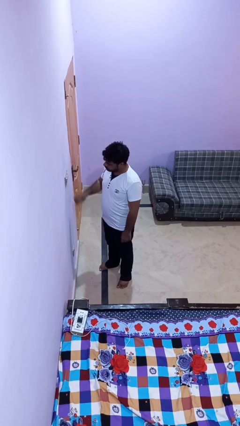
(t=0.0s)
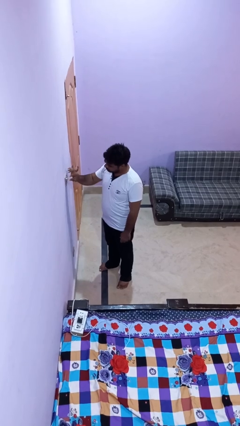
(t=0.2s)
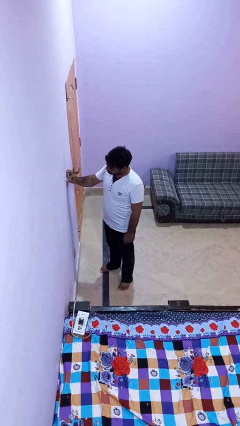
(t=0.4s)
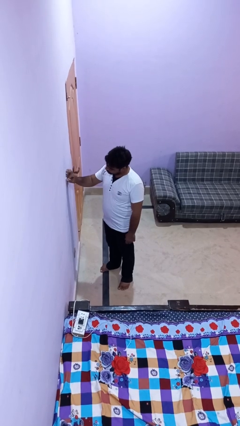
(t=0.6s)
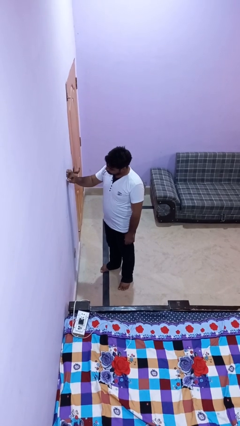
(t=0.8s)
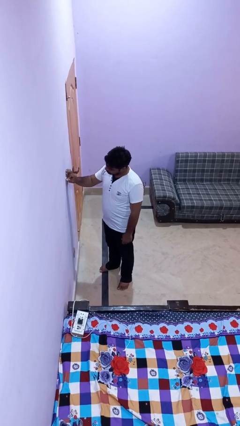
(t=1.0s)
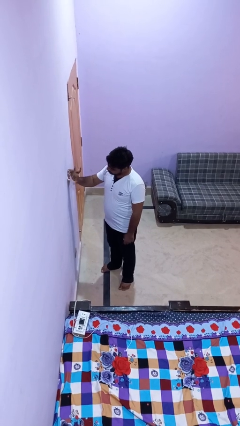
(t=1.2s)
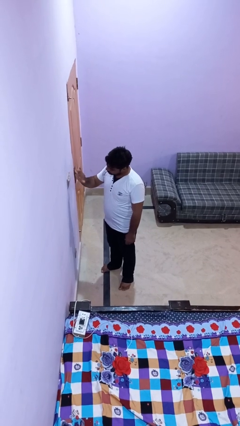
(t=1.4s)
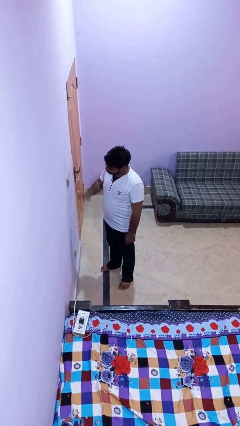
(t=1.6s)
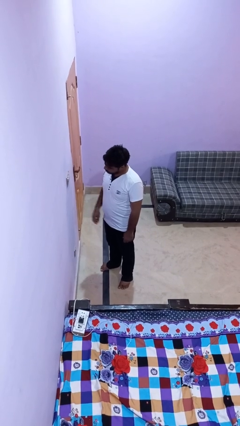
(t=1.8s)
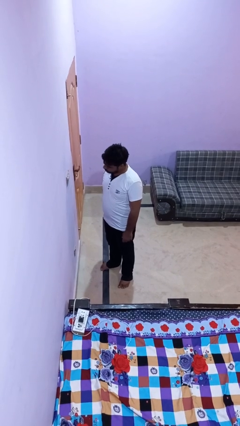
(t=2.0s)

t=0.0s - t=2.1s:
person adjusts thermostat

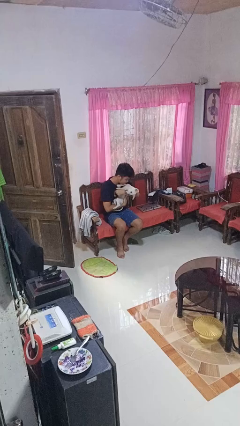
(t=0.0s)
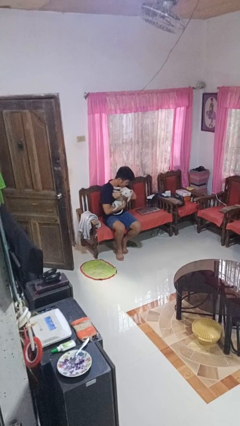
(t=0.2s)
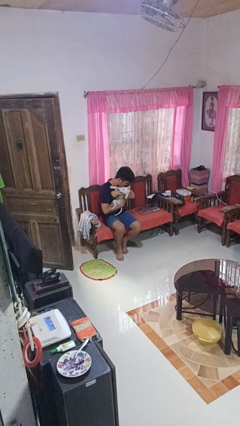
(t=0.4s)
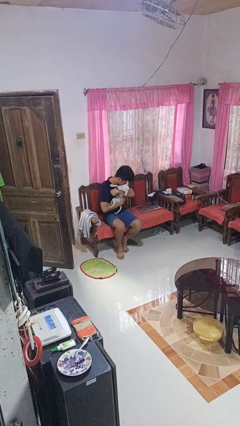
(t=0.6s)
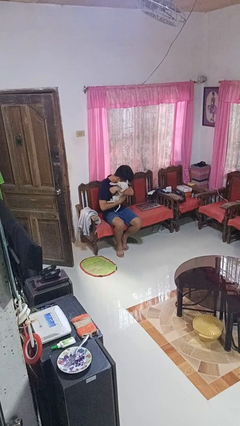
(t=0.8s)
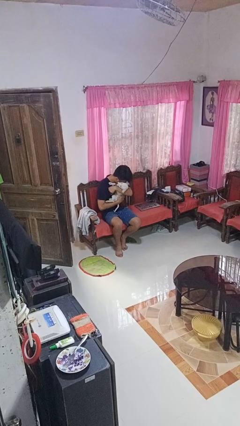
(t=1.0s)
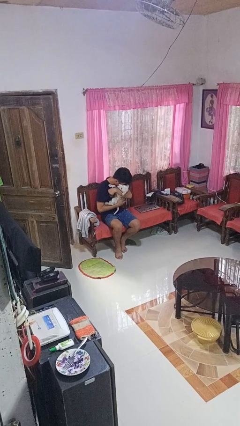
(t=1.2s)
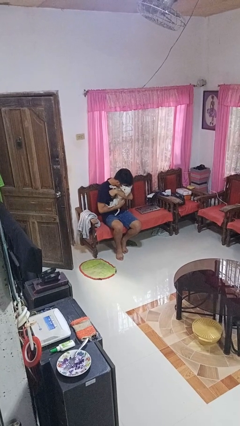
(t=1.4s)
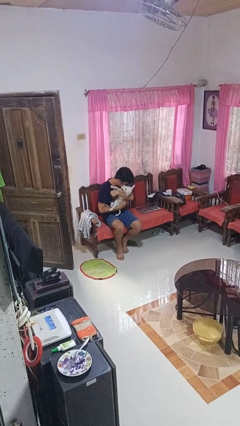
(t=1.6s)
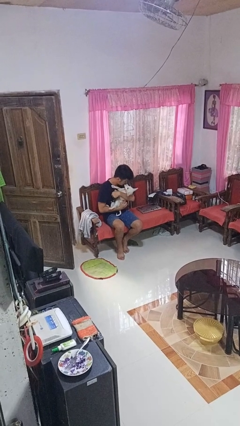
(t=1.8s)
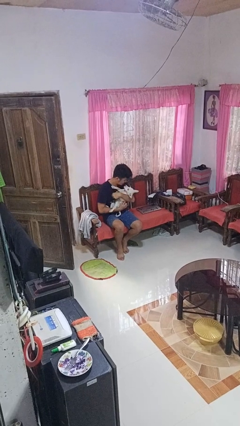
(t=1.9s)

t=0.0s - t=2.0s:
person hugs dog

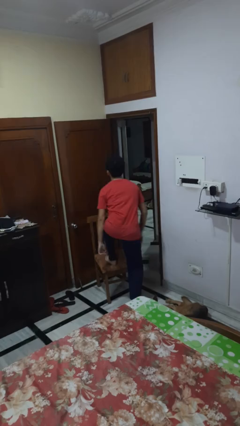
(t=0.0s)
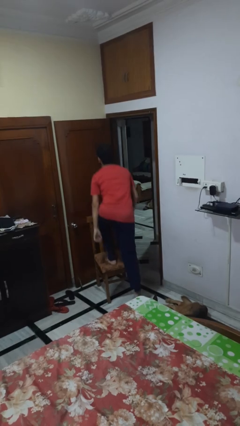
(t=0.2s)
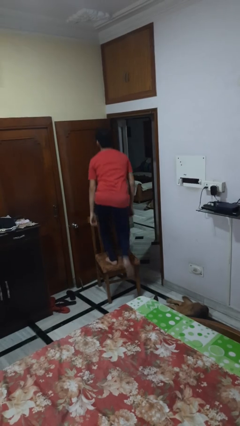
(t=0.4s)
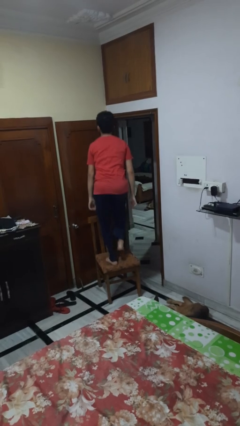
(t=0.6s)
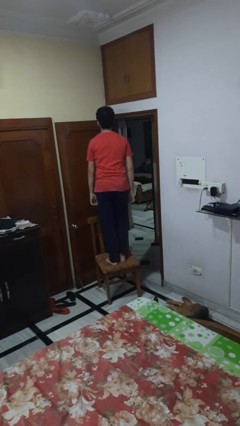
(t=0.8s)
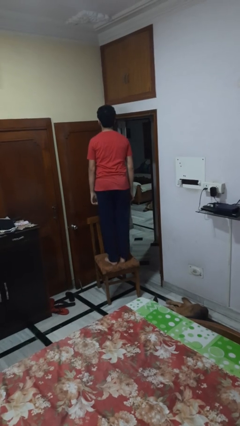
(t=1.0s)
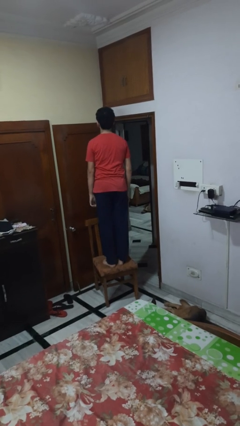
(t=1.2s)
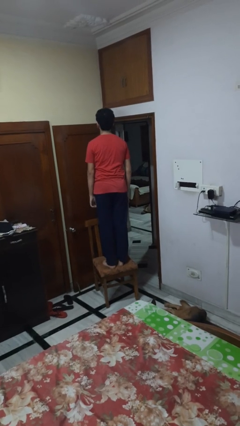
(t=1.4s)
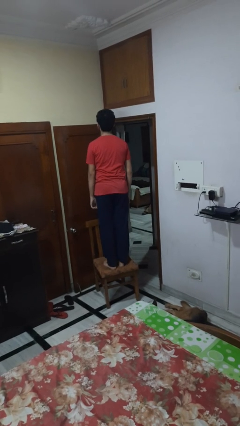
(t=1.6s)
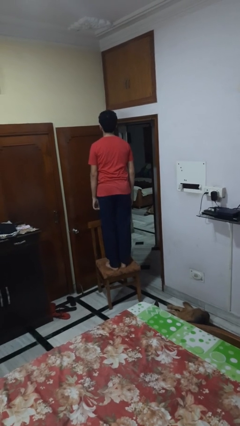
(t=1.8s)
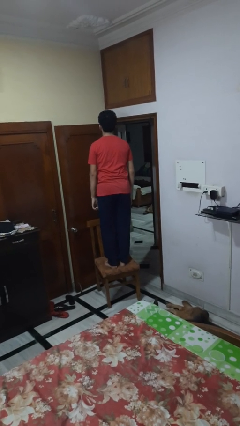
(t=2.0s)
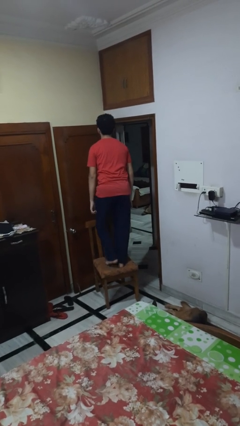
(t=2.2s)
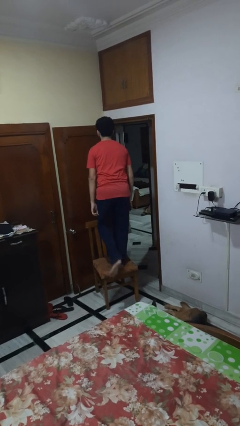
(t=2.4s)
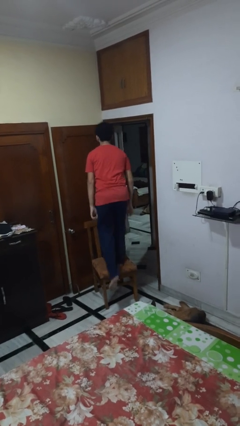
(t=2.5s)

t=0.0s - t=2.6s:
person climbs on chair

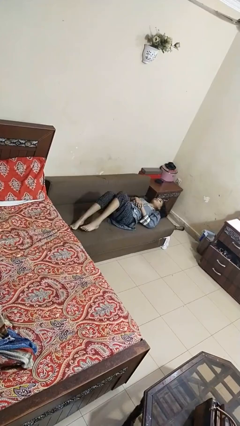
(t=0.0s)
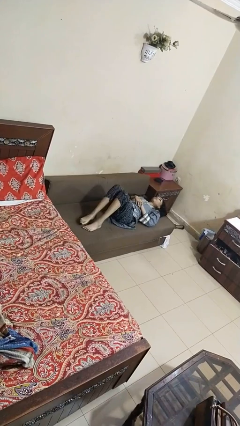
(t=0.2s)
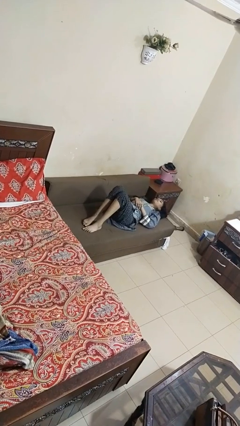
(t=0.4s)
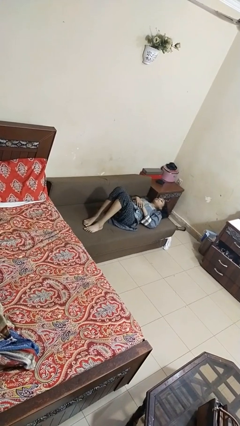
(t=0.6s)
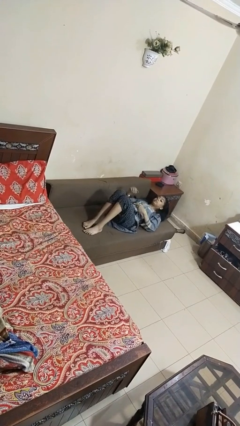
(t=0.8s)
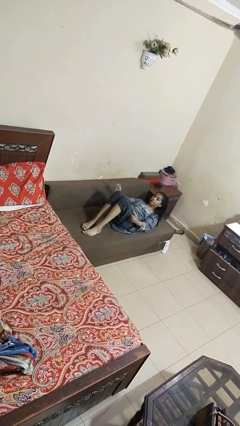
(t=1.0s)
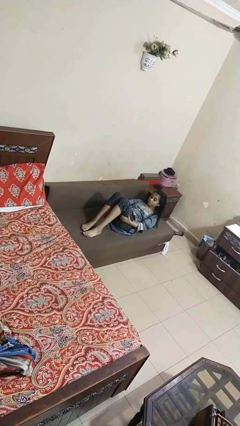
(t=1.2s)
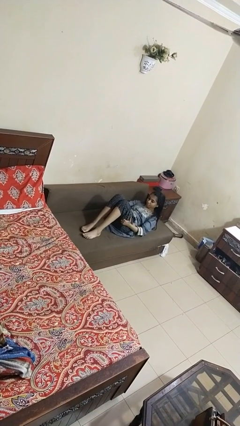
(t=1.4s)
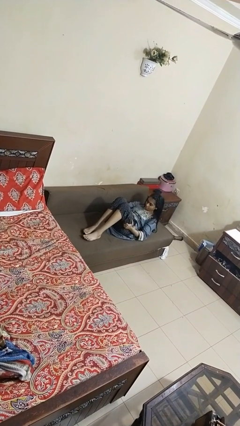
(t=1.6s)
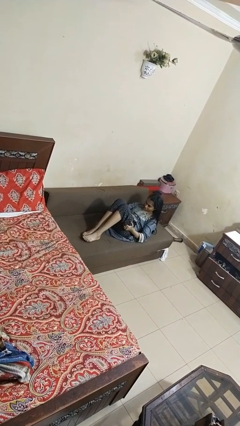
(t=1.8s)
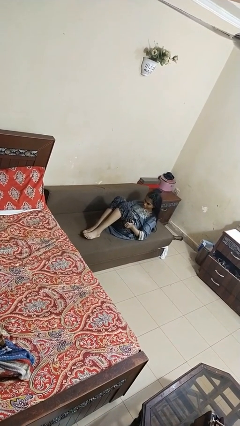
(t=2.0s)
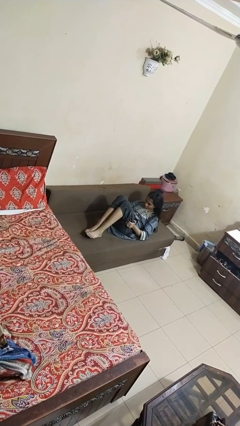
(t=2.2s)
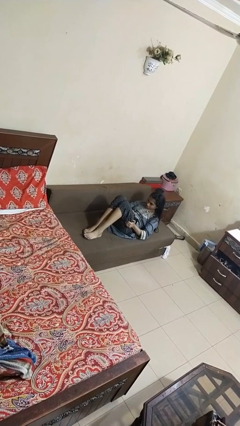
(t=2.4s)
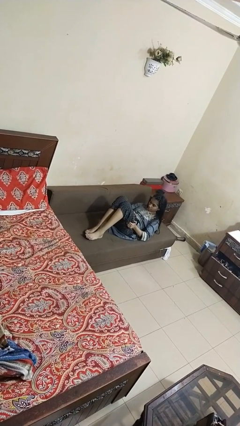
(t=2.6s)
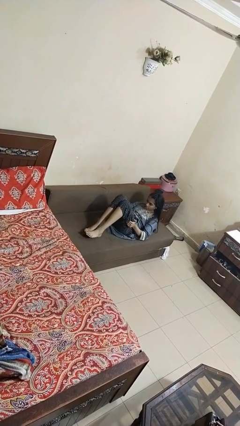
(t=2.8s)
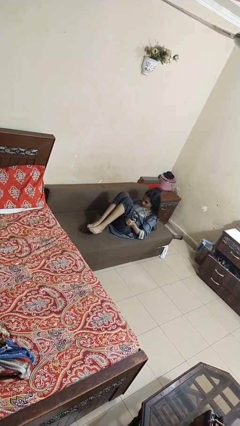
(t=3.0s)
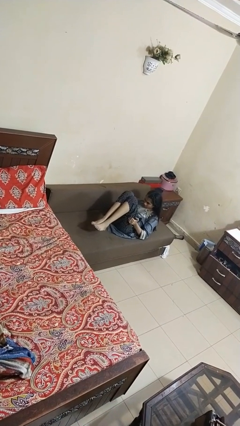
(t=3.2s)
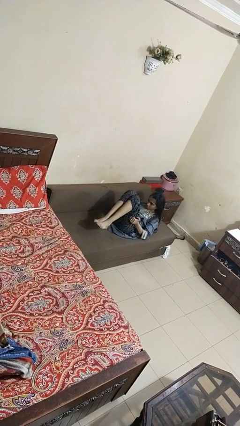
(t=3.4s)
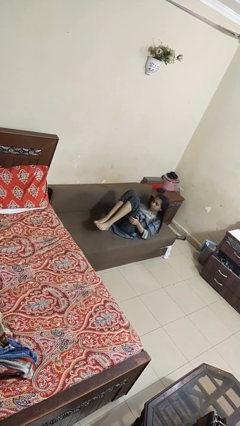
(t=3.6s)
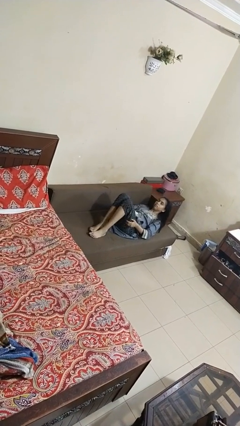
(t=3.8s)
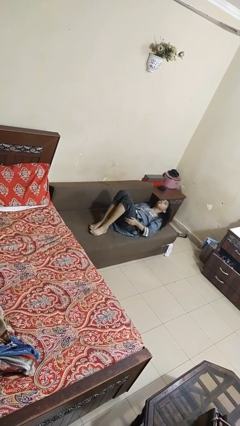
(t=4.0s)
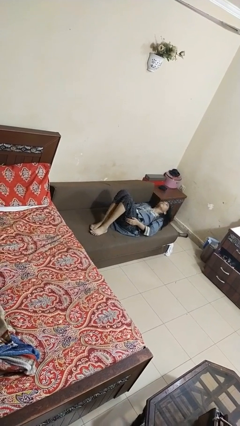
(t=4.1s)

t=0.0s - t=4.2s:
person exercises with pushup

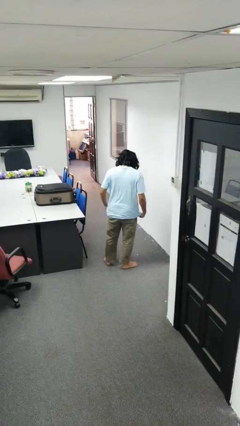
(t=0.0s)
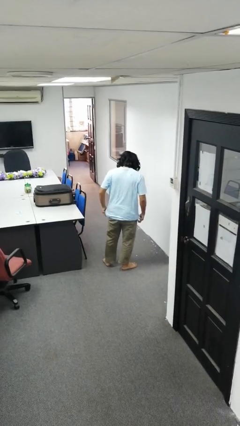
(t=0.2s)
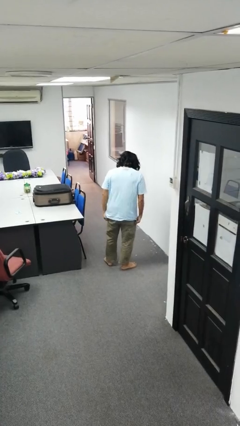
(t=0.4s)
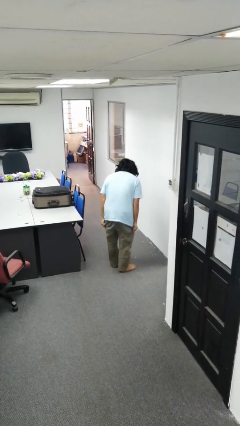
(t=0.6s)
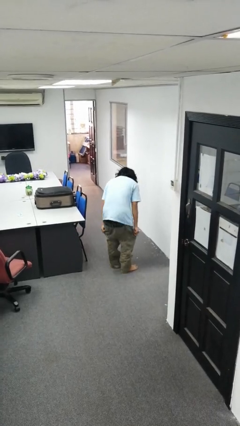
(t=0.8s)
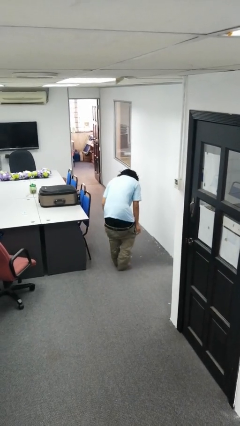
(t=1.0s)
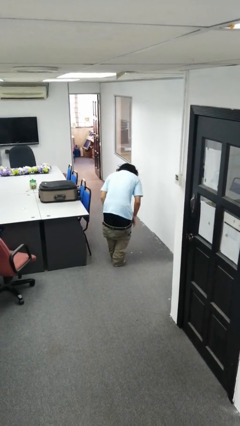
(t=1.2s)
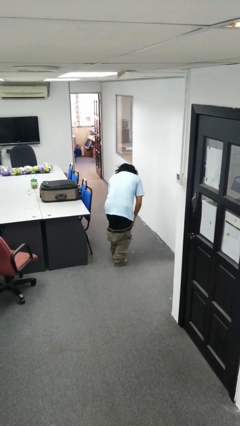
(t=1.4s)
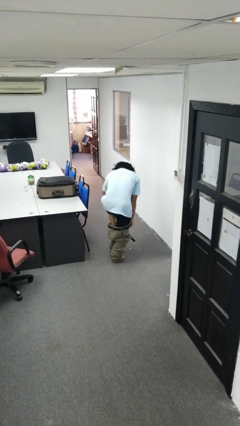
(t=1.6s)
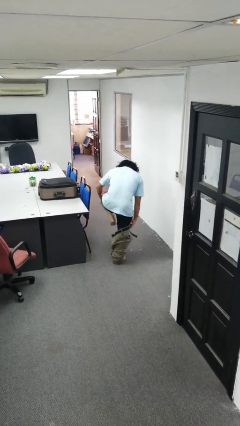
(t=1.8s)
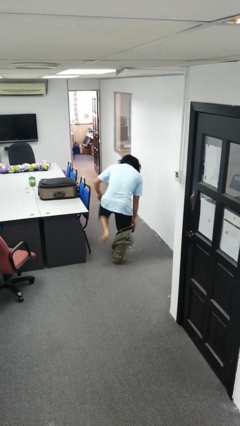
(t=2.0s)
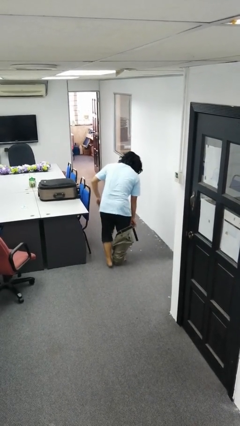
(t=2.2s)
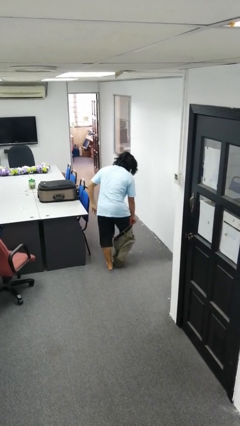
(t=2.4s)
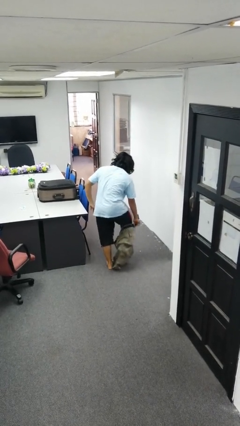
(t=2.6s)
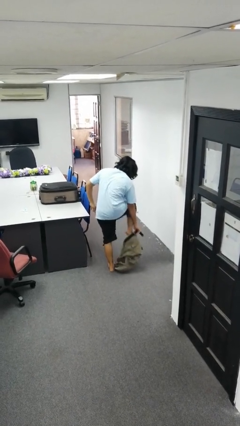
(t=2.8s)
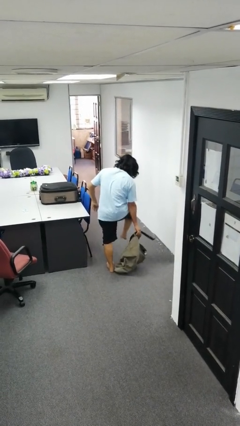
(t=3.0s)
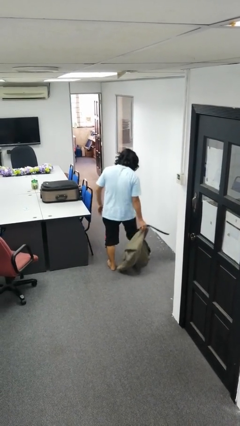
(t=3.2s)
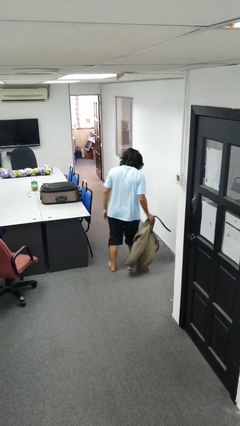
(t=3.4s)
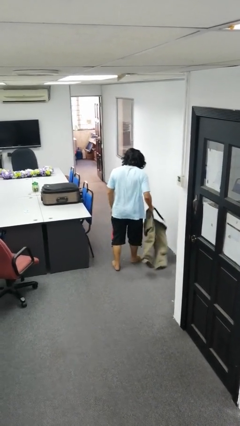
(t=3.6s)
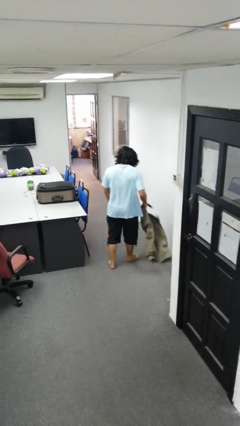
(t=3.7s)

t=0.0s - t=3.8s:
person puts on pants

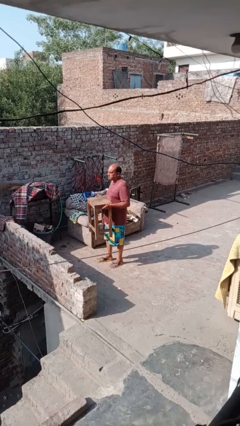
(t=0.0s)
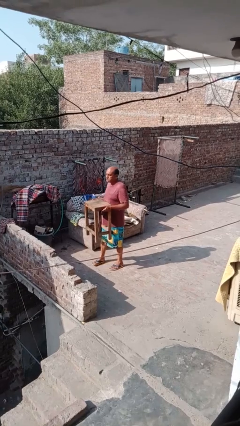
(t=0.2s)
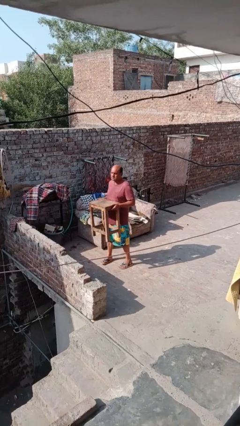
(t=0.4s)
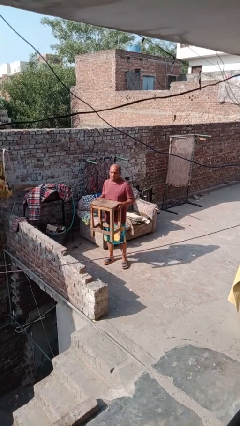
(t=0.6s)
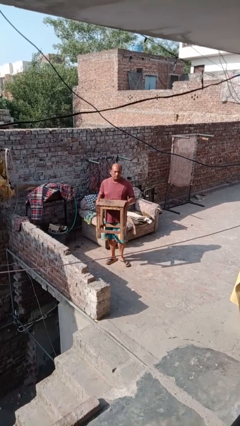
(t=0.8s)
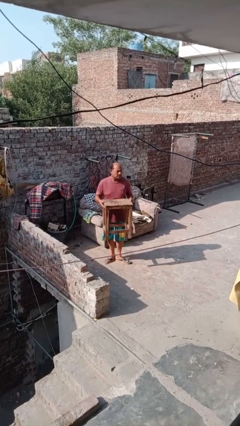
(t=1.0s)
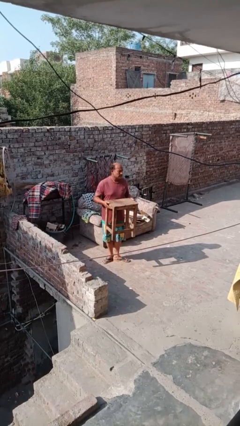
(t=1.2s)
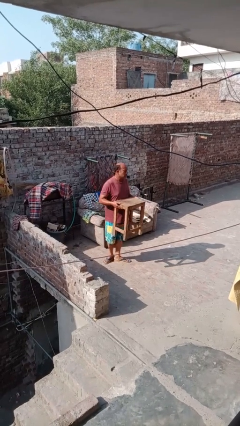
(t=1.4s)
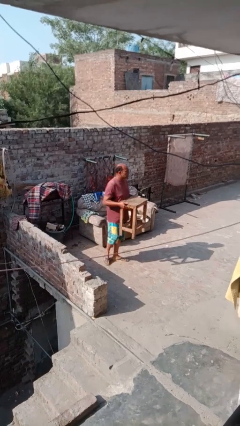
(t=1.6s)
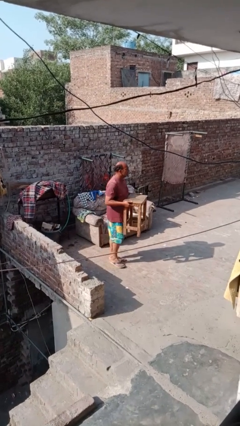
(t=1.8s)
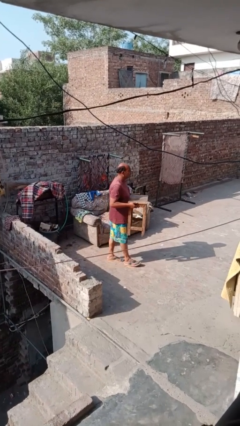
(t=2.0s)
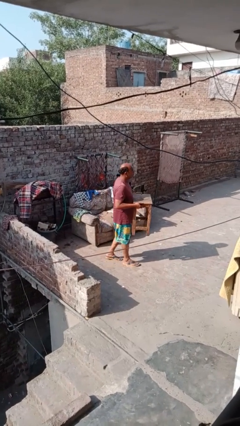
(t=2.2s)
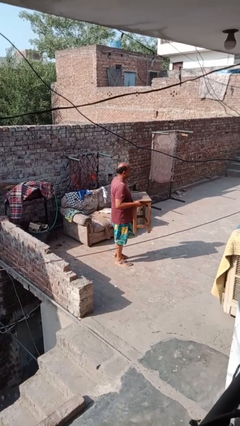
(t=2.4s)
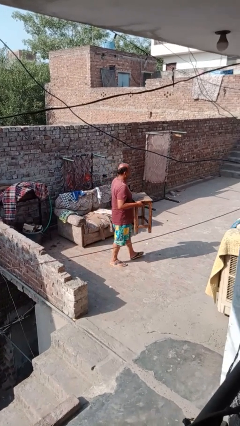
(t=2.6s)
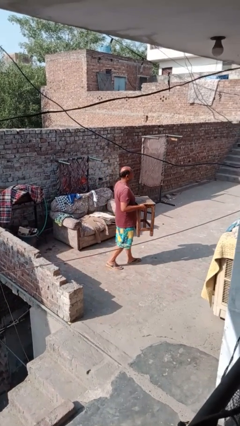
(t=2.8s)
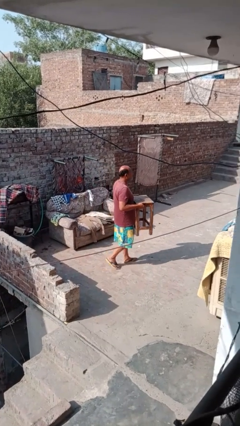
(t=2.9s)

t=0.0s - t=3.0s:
person carries furniture

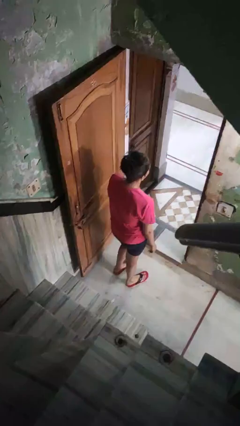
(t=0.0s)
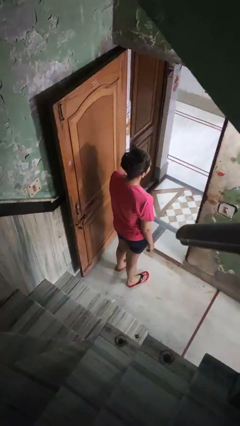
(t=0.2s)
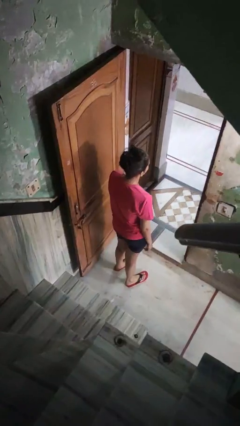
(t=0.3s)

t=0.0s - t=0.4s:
person climbs down stairs
